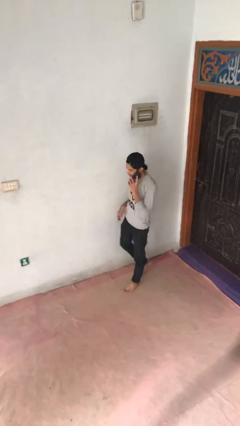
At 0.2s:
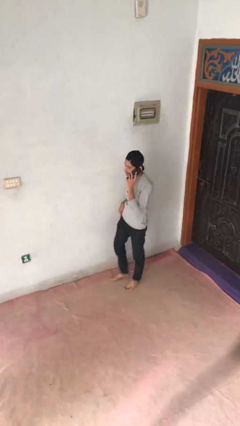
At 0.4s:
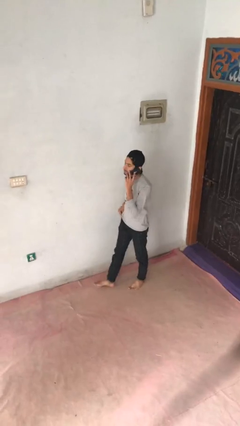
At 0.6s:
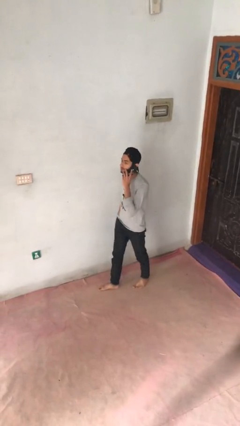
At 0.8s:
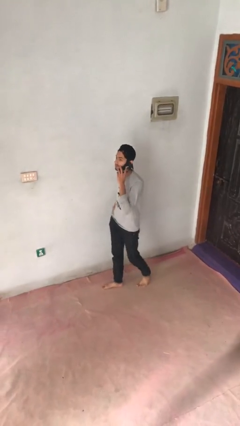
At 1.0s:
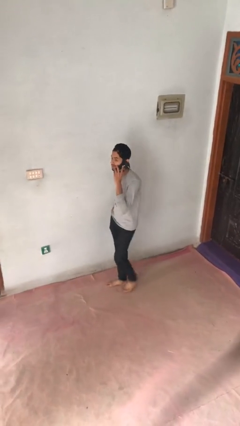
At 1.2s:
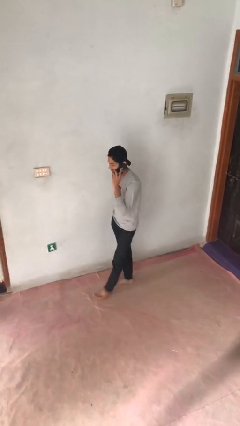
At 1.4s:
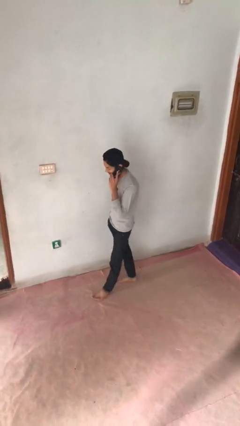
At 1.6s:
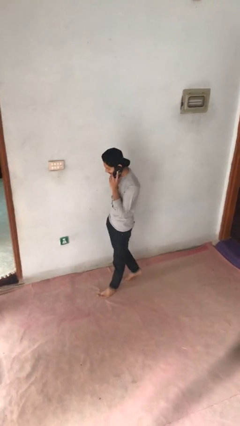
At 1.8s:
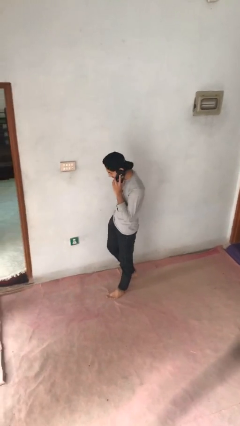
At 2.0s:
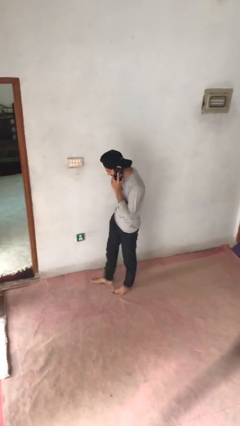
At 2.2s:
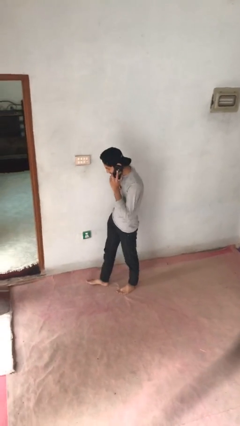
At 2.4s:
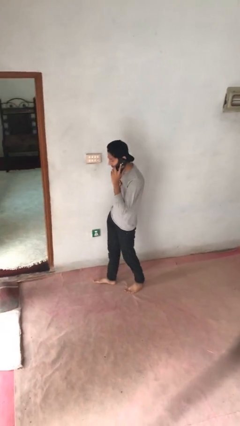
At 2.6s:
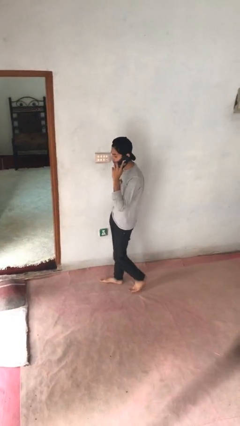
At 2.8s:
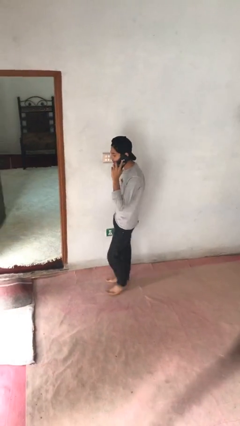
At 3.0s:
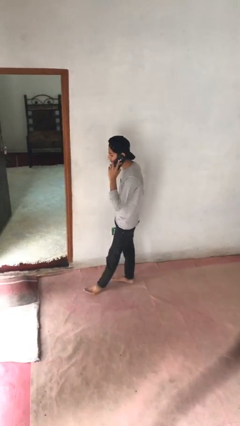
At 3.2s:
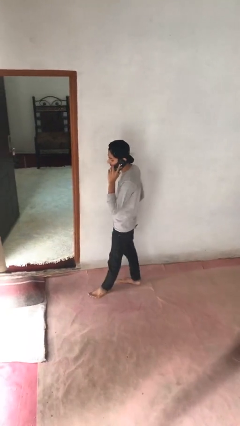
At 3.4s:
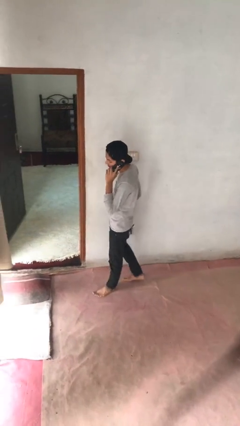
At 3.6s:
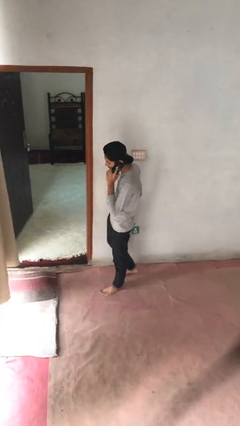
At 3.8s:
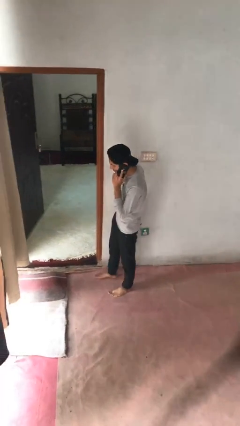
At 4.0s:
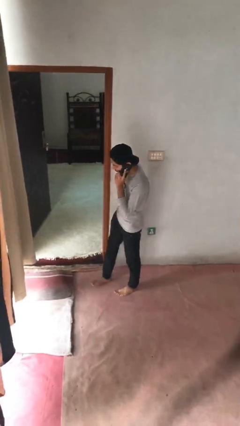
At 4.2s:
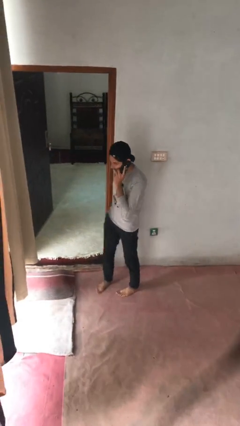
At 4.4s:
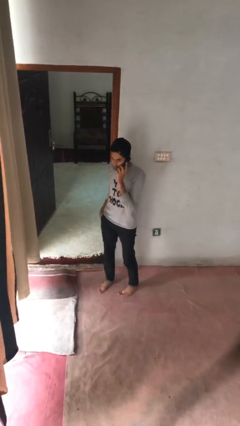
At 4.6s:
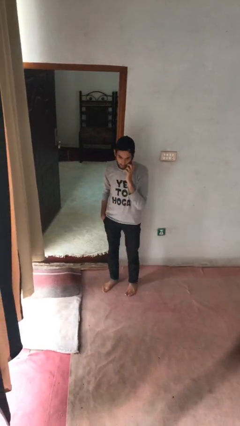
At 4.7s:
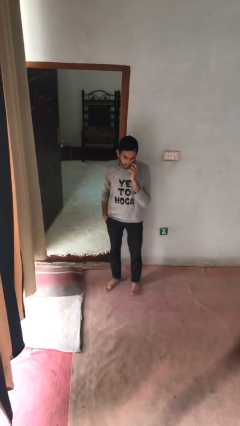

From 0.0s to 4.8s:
person talks on phone

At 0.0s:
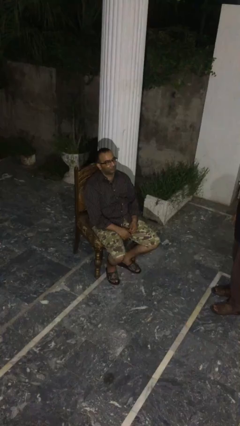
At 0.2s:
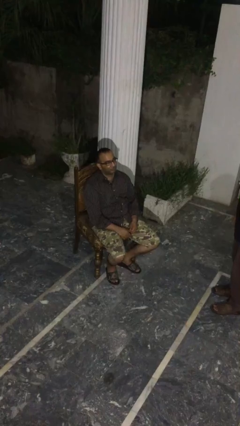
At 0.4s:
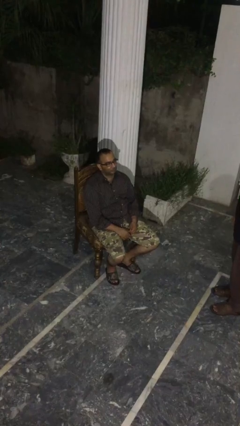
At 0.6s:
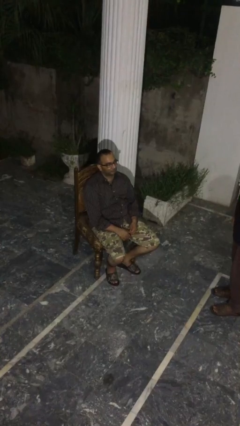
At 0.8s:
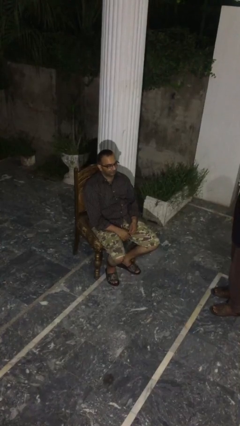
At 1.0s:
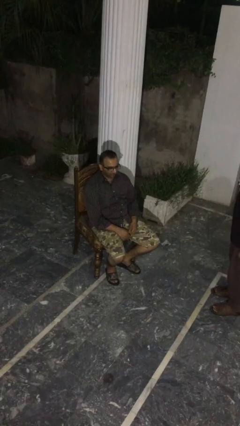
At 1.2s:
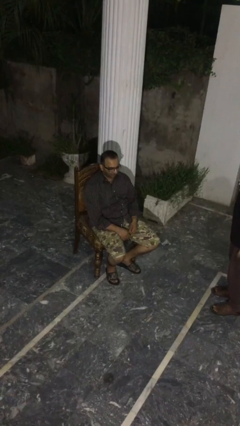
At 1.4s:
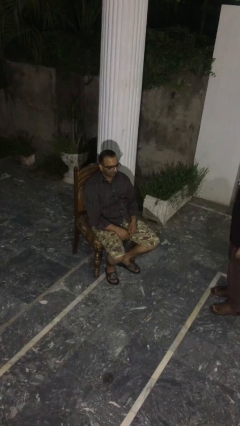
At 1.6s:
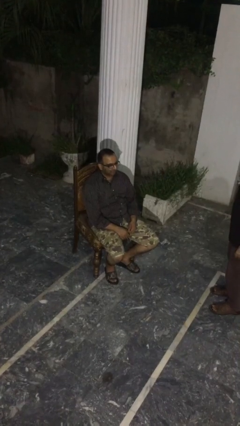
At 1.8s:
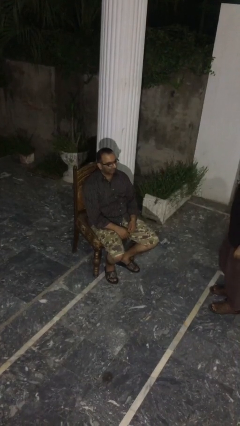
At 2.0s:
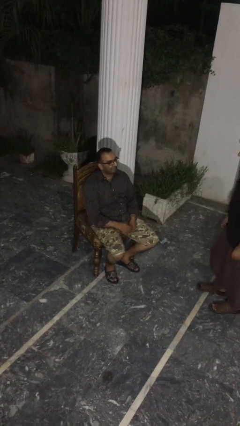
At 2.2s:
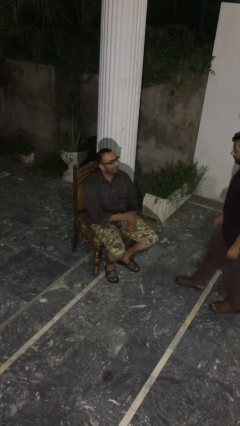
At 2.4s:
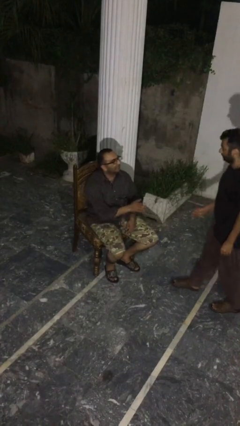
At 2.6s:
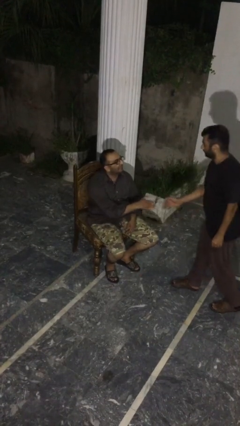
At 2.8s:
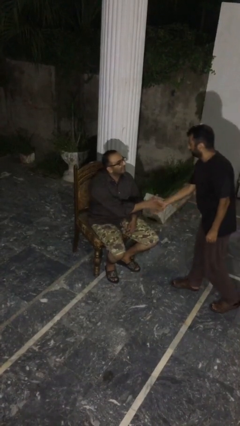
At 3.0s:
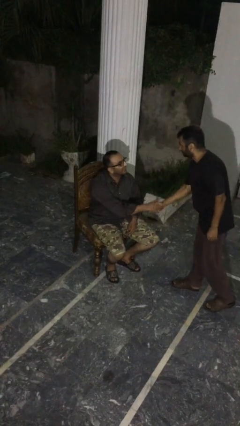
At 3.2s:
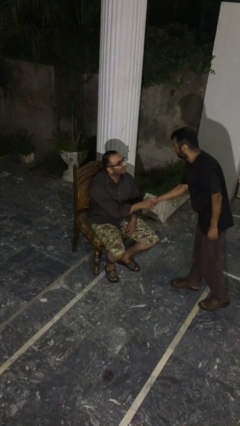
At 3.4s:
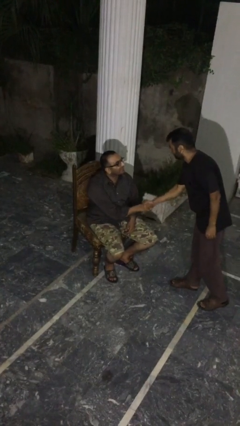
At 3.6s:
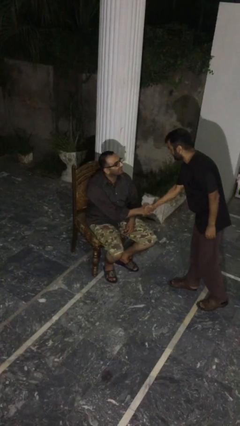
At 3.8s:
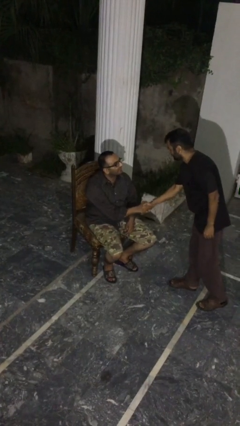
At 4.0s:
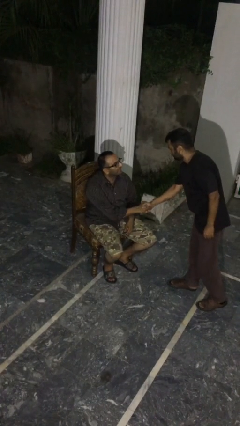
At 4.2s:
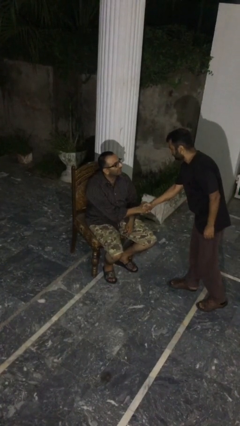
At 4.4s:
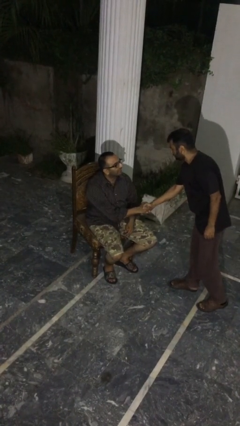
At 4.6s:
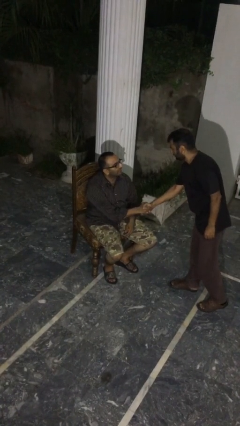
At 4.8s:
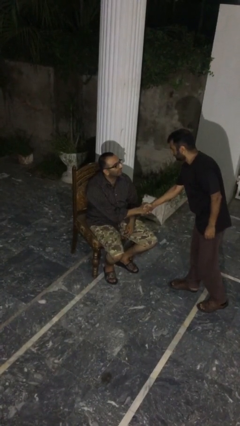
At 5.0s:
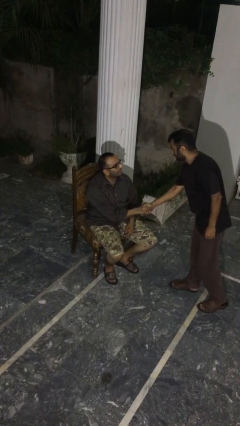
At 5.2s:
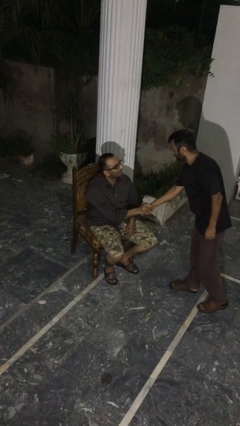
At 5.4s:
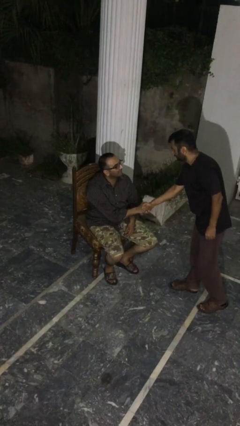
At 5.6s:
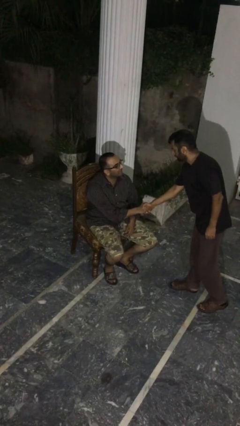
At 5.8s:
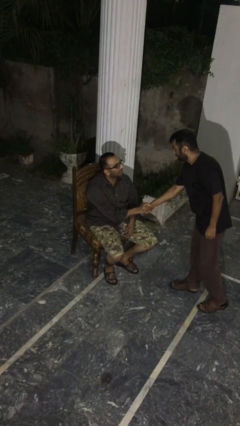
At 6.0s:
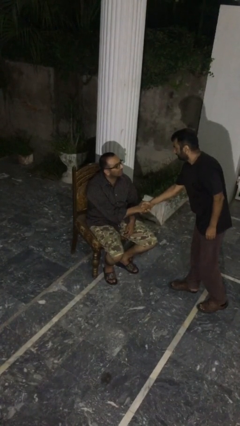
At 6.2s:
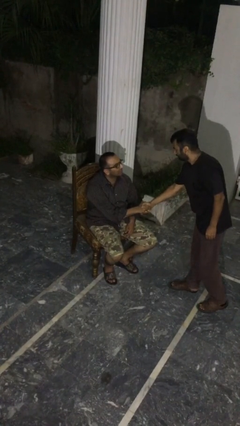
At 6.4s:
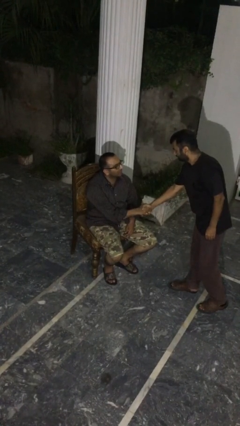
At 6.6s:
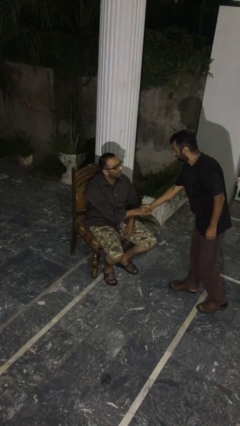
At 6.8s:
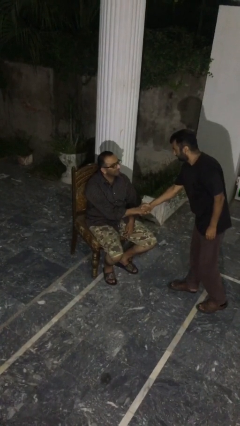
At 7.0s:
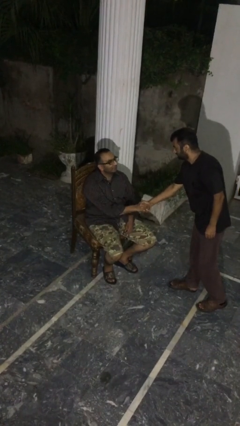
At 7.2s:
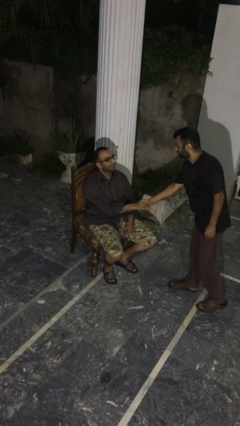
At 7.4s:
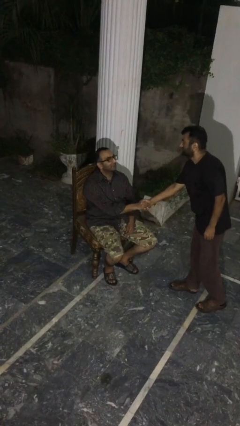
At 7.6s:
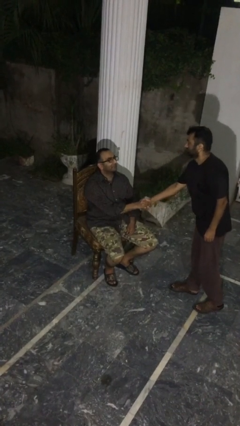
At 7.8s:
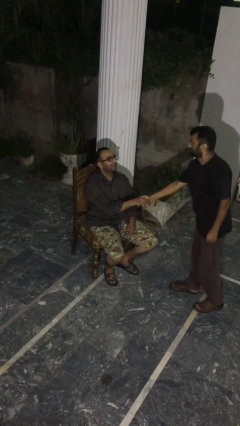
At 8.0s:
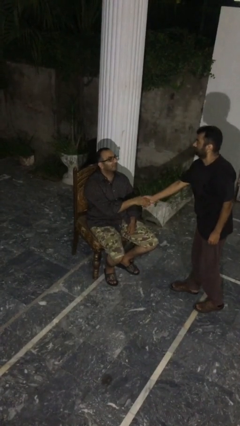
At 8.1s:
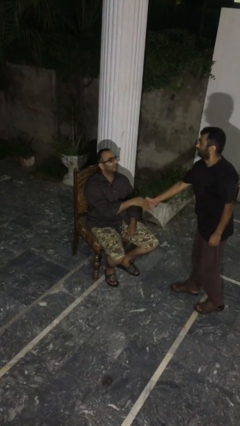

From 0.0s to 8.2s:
person shakes hand

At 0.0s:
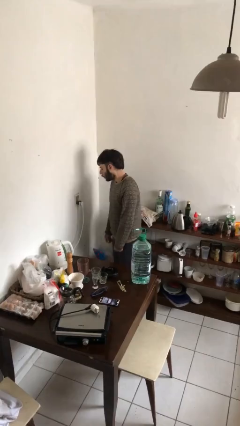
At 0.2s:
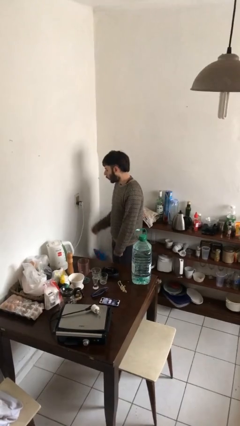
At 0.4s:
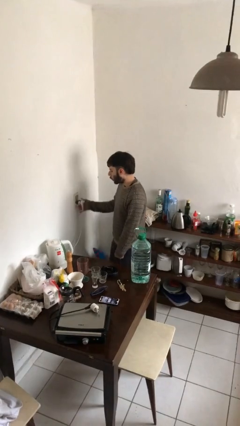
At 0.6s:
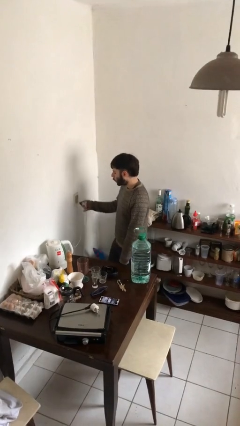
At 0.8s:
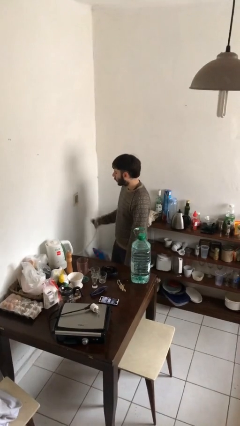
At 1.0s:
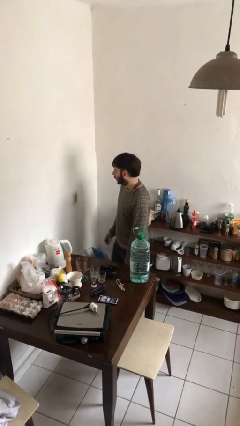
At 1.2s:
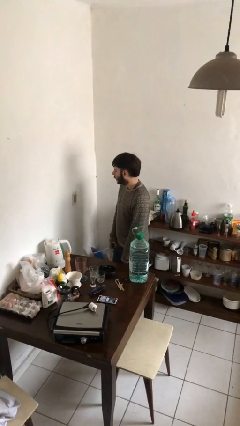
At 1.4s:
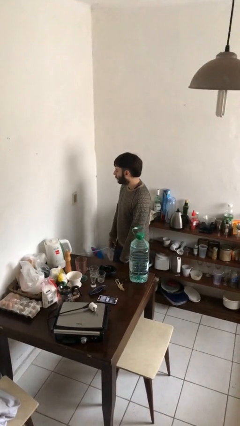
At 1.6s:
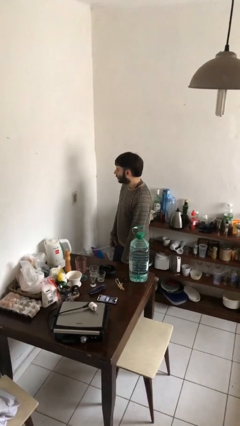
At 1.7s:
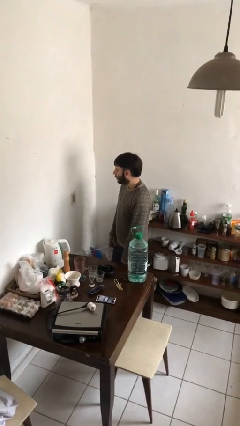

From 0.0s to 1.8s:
person unplugs from electrical socket

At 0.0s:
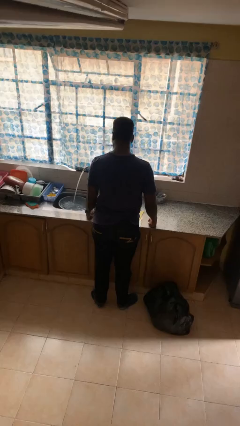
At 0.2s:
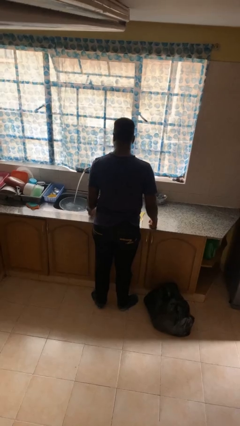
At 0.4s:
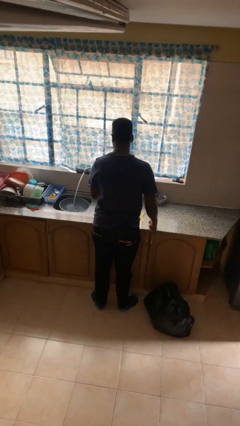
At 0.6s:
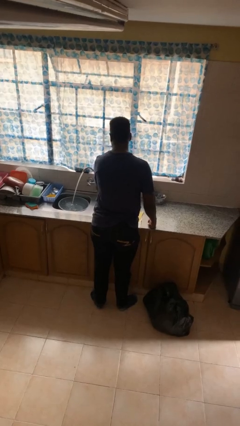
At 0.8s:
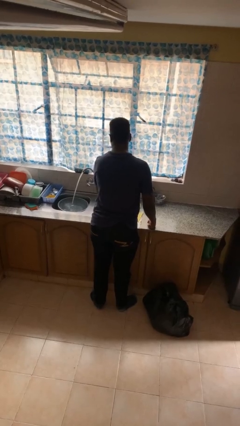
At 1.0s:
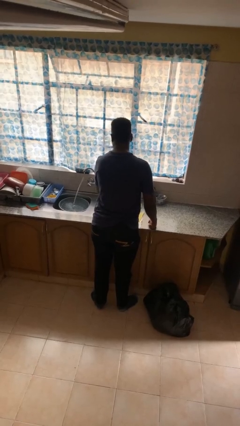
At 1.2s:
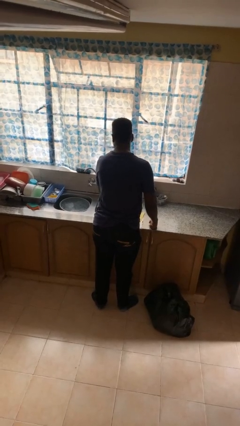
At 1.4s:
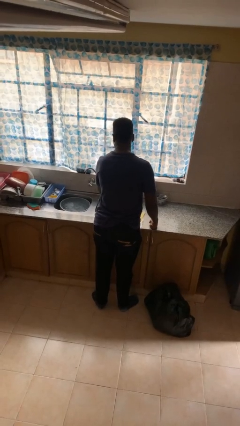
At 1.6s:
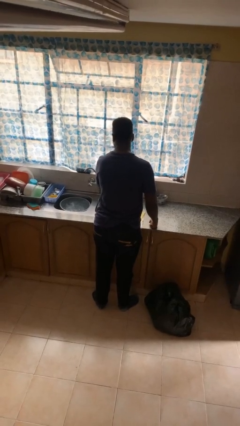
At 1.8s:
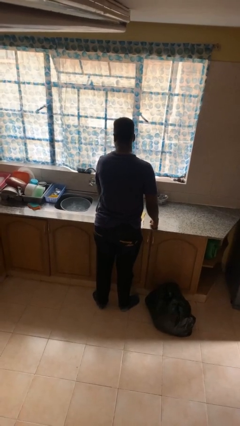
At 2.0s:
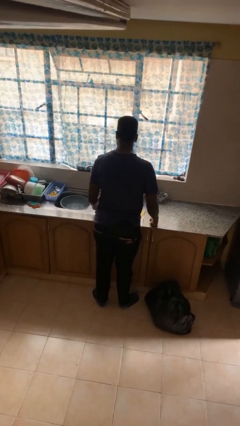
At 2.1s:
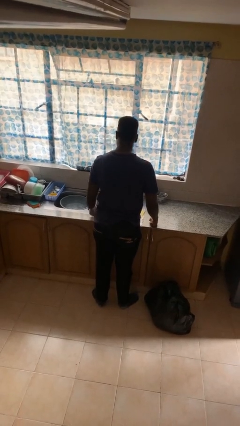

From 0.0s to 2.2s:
person turns off faucet

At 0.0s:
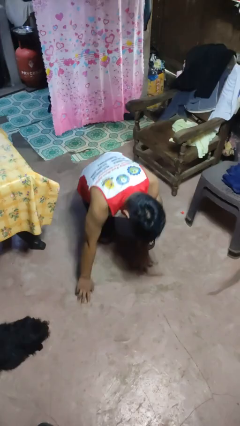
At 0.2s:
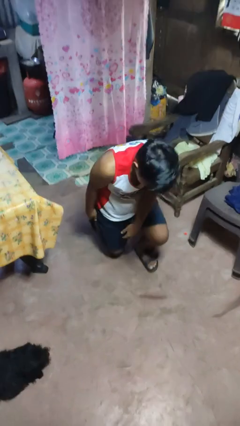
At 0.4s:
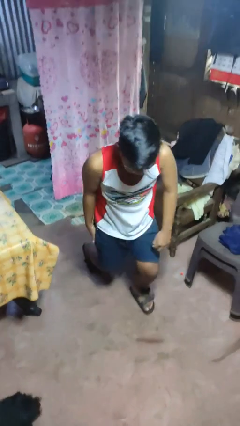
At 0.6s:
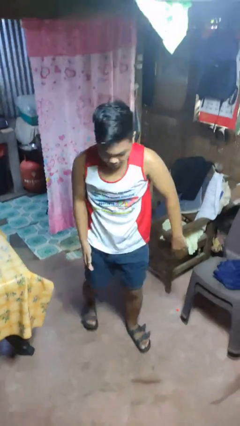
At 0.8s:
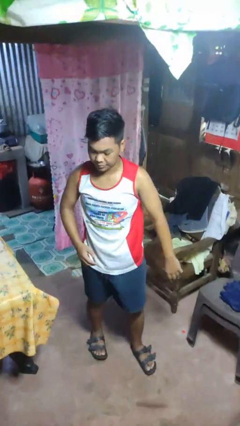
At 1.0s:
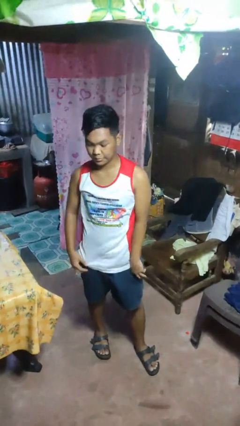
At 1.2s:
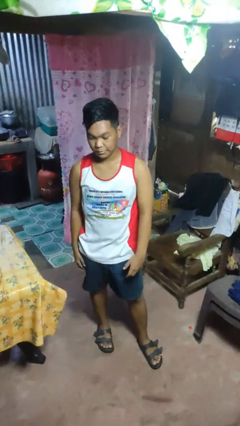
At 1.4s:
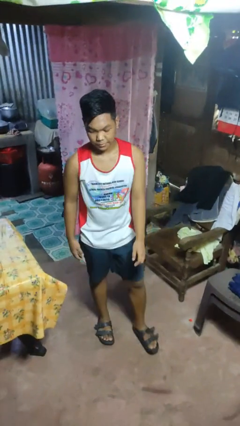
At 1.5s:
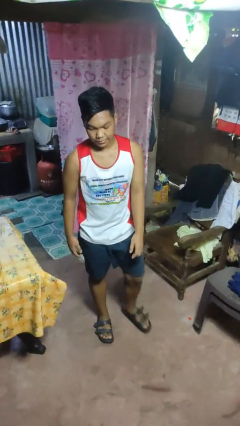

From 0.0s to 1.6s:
person stands up from floor
